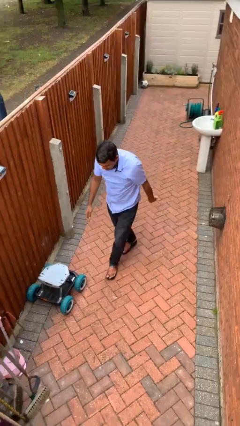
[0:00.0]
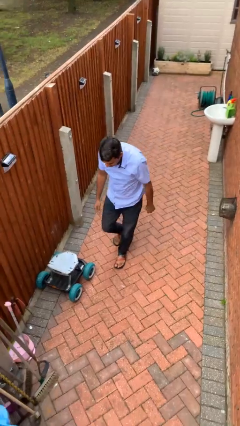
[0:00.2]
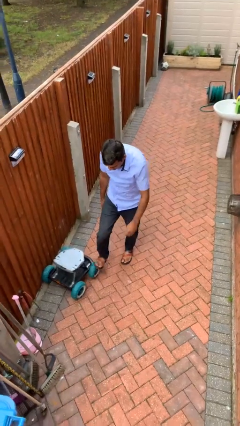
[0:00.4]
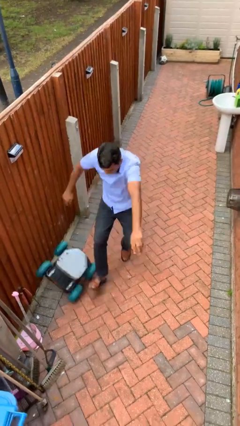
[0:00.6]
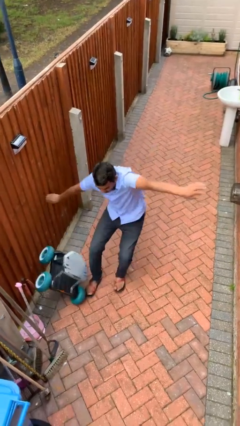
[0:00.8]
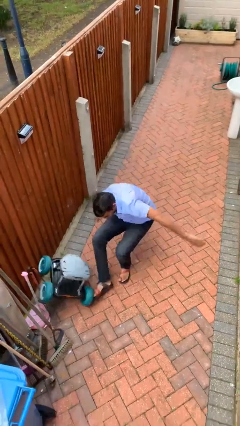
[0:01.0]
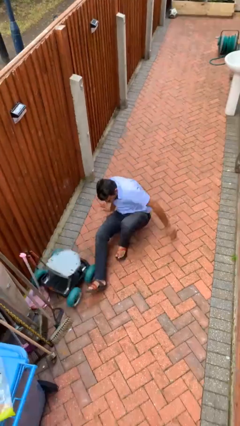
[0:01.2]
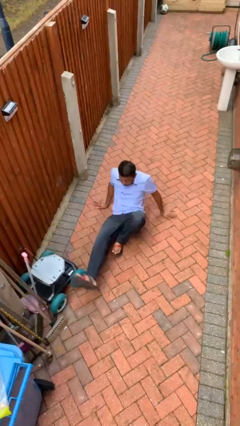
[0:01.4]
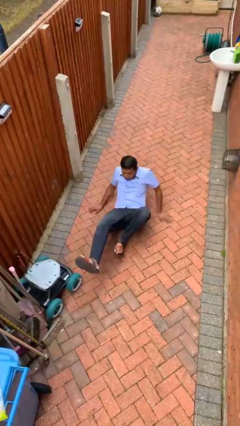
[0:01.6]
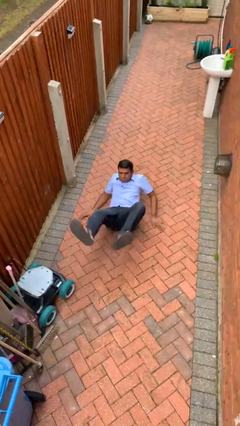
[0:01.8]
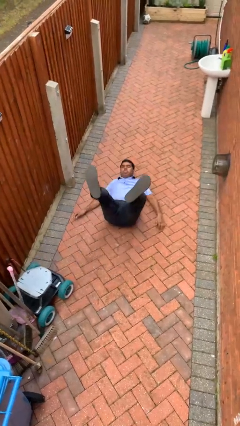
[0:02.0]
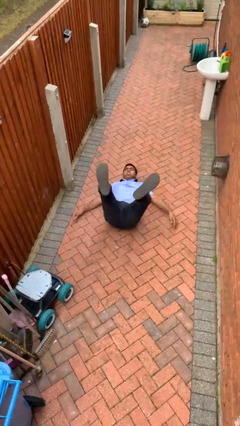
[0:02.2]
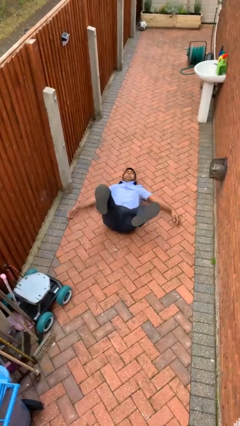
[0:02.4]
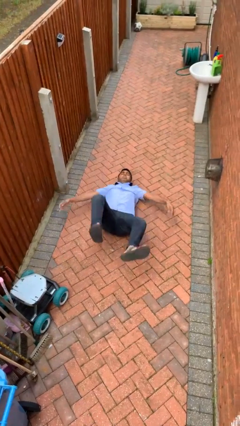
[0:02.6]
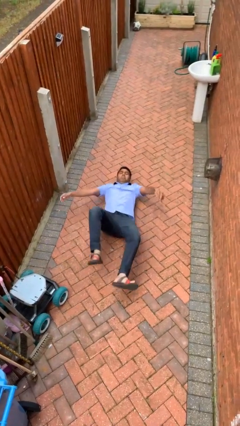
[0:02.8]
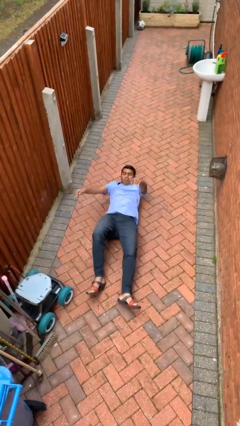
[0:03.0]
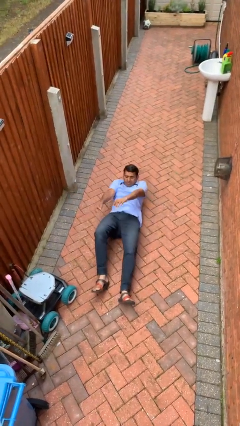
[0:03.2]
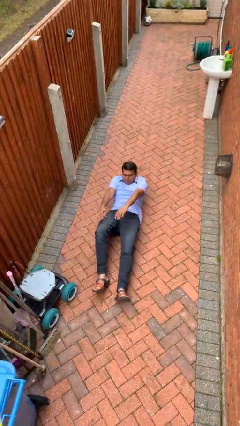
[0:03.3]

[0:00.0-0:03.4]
person trips on object on floor

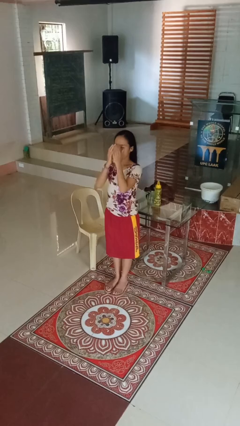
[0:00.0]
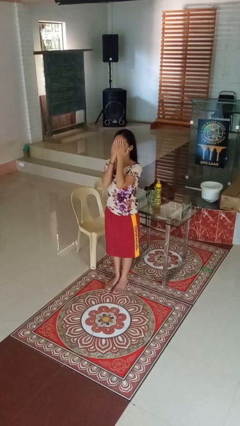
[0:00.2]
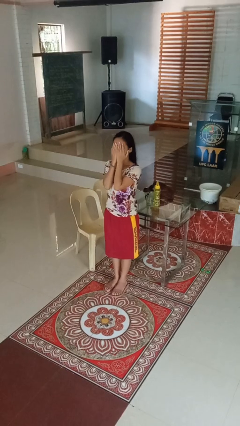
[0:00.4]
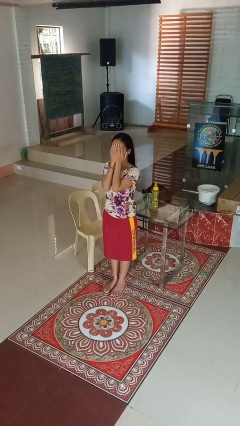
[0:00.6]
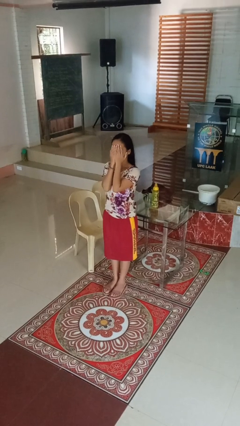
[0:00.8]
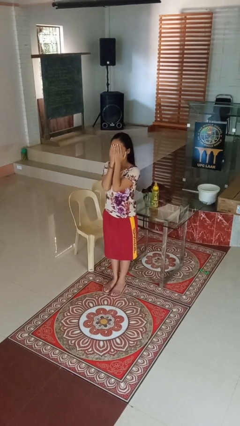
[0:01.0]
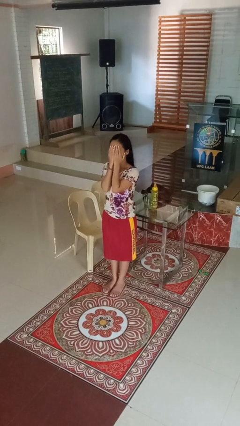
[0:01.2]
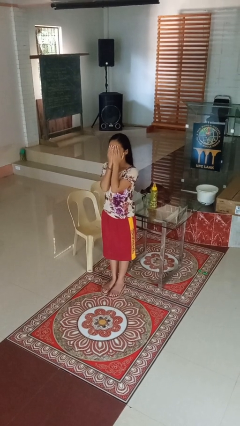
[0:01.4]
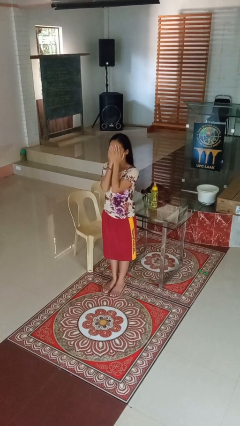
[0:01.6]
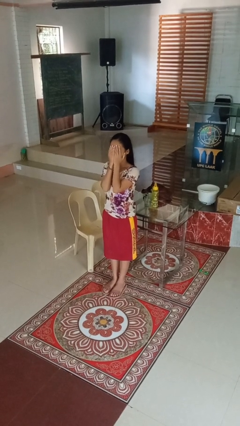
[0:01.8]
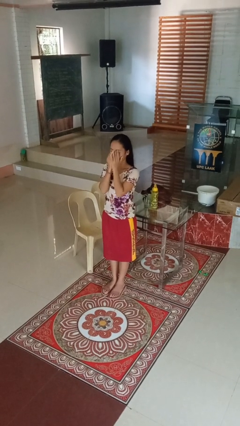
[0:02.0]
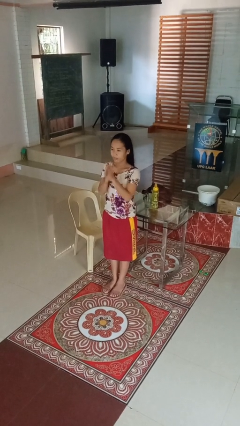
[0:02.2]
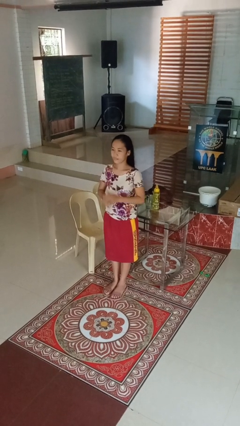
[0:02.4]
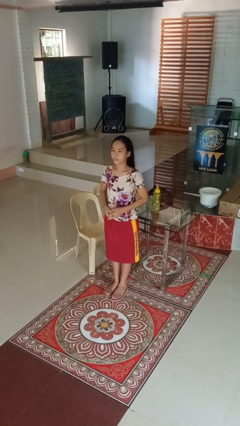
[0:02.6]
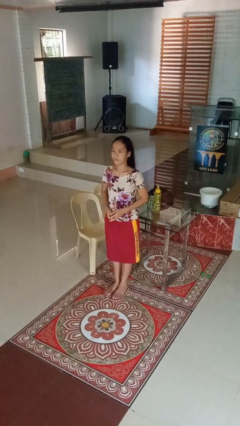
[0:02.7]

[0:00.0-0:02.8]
person covers face with hands

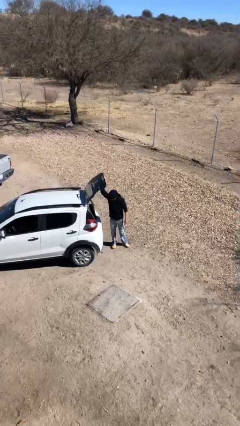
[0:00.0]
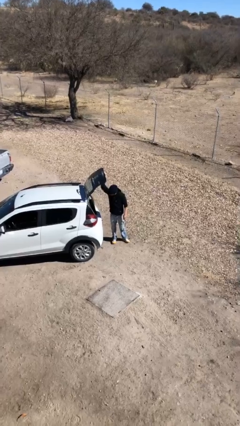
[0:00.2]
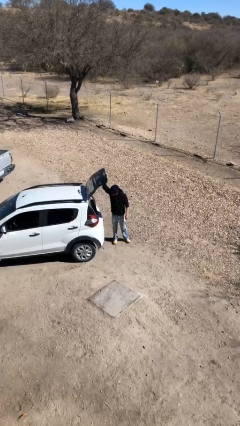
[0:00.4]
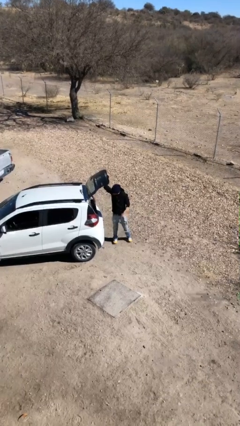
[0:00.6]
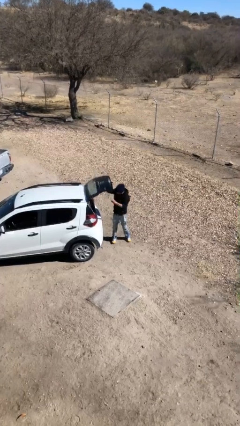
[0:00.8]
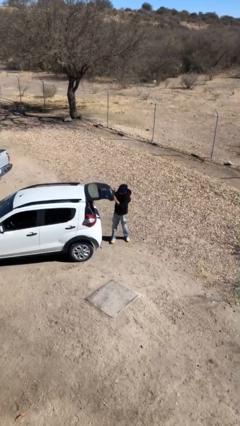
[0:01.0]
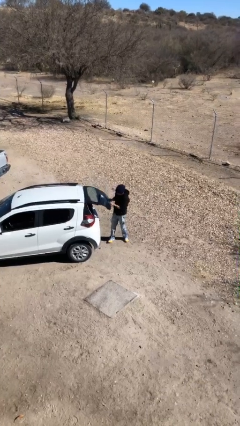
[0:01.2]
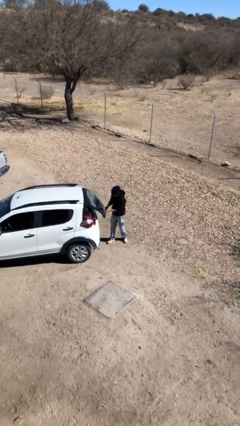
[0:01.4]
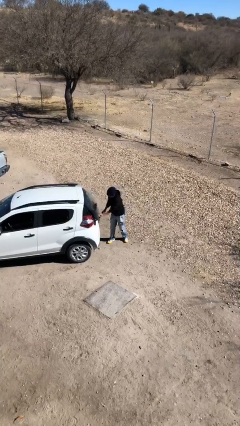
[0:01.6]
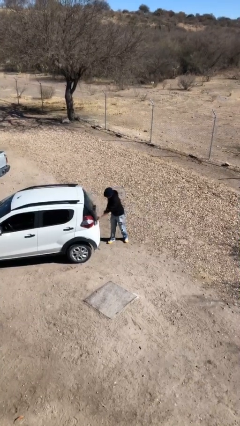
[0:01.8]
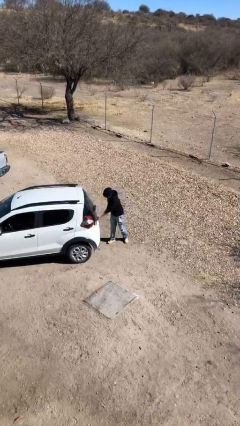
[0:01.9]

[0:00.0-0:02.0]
person closes car trunk

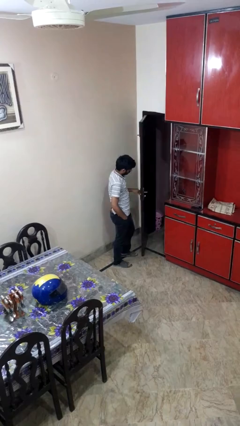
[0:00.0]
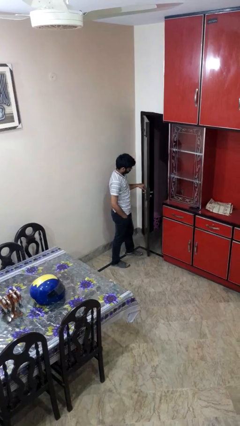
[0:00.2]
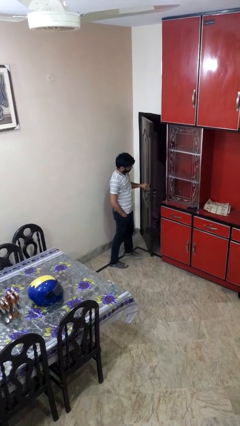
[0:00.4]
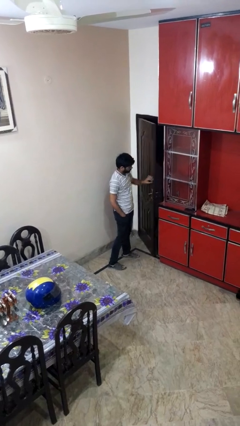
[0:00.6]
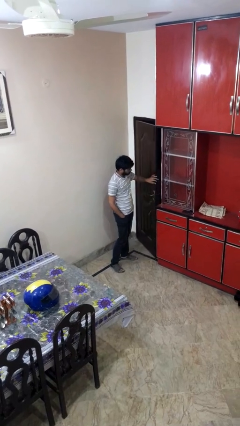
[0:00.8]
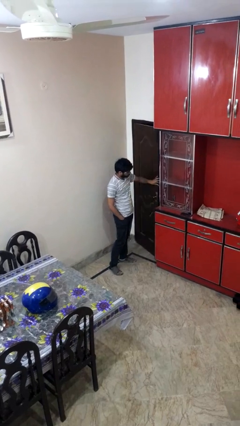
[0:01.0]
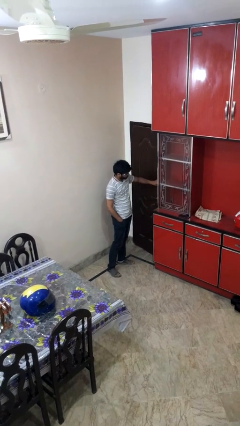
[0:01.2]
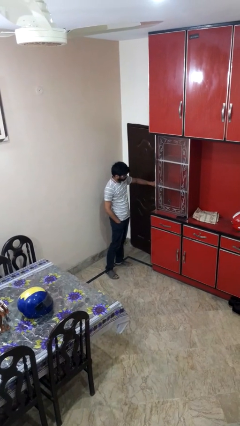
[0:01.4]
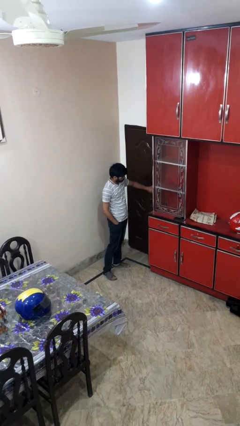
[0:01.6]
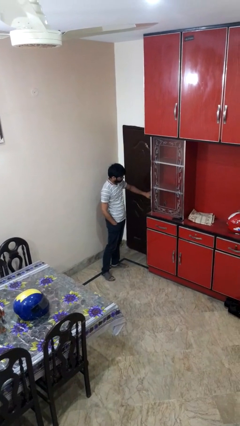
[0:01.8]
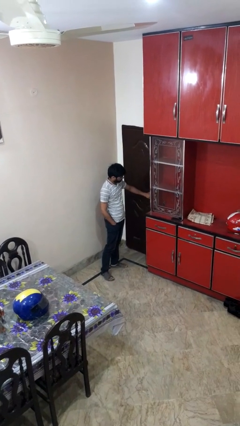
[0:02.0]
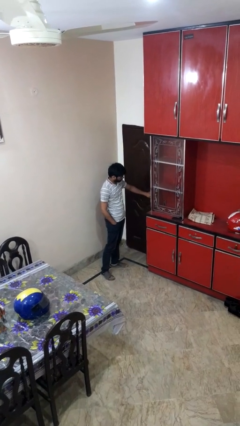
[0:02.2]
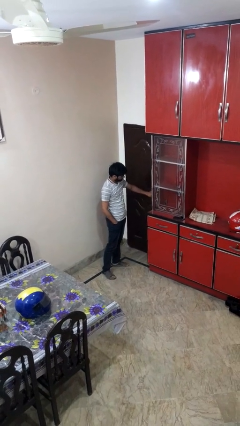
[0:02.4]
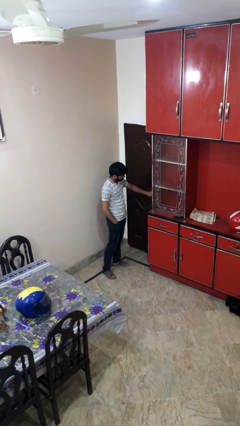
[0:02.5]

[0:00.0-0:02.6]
person closes facility door

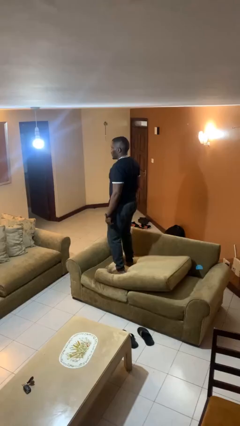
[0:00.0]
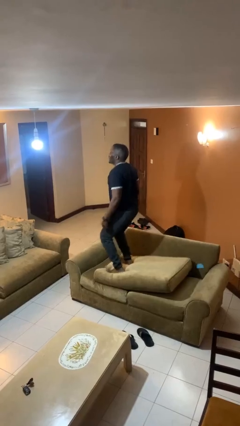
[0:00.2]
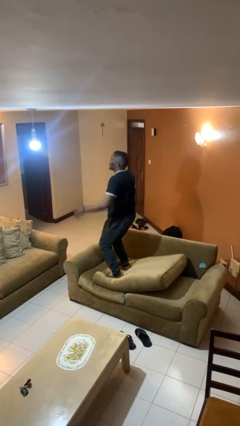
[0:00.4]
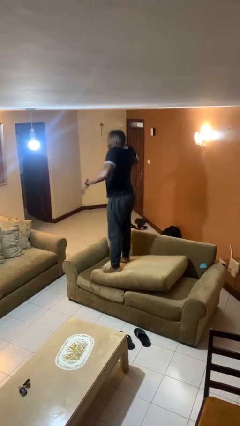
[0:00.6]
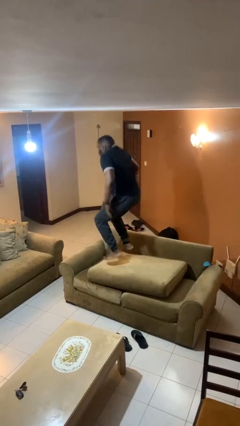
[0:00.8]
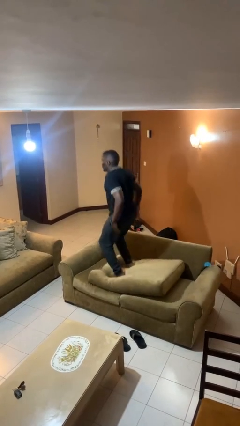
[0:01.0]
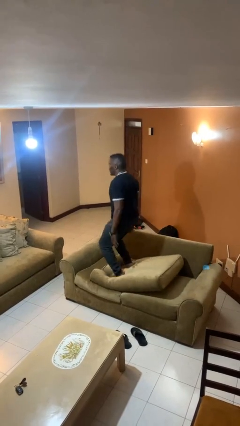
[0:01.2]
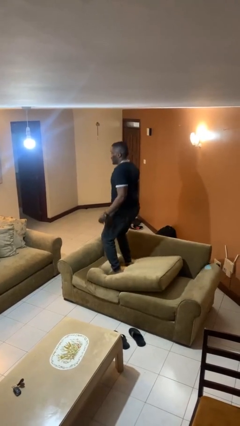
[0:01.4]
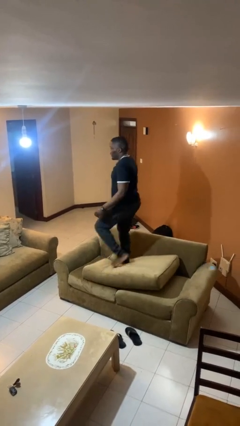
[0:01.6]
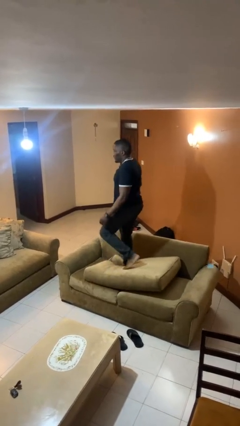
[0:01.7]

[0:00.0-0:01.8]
person jumps on couch

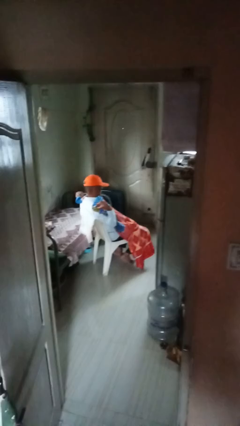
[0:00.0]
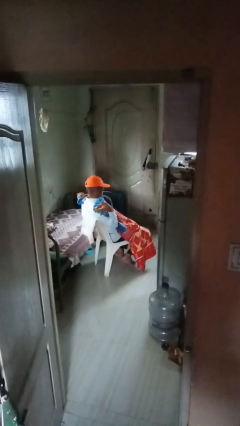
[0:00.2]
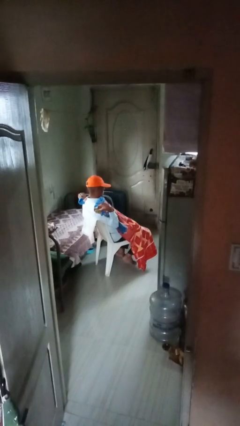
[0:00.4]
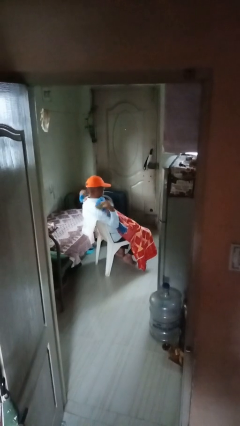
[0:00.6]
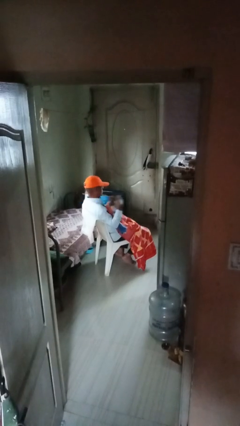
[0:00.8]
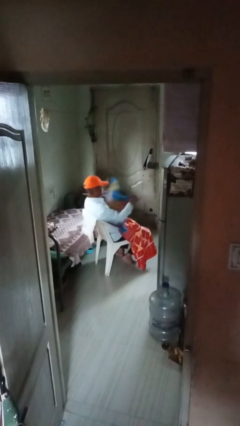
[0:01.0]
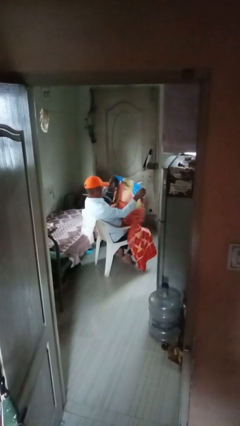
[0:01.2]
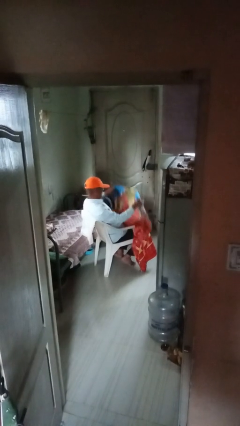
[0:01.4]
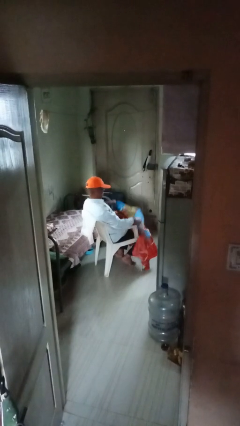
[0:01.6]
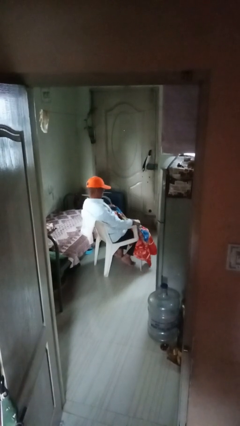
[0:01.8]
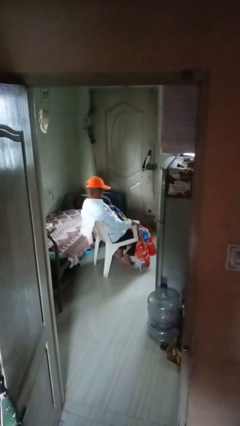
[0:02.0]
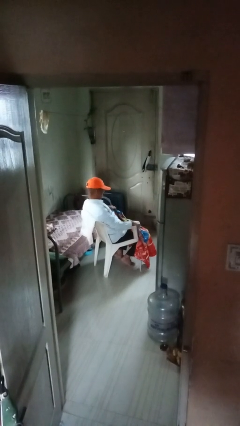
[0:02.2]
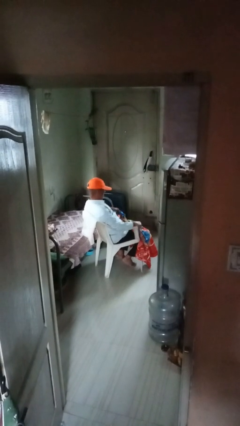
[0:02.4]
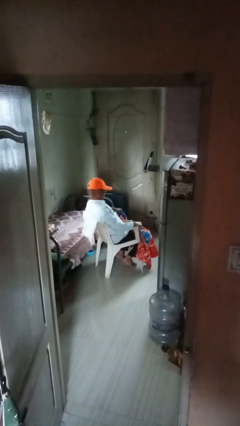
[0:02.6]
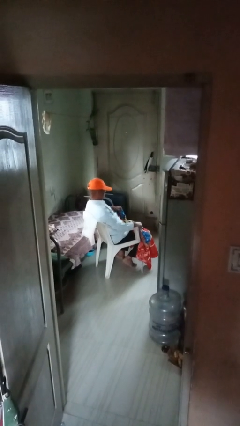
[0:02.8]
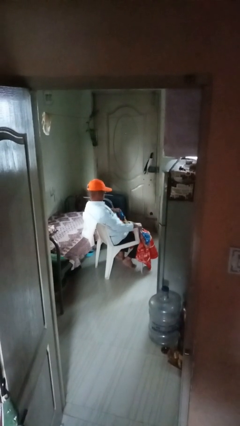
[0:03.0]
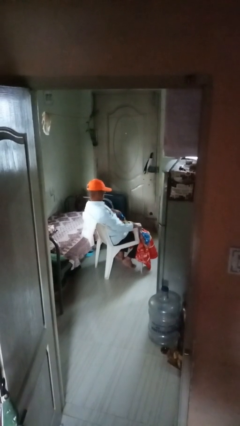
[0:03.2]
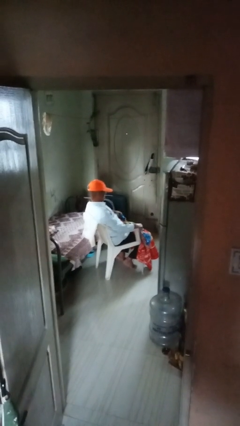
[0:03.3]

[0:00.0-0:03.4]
person uncovers with blanket

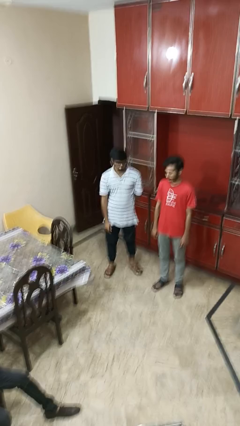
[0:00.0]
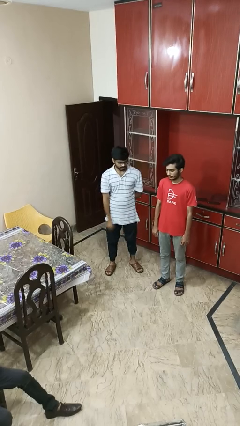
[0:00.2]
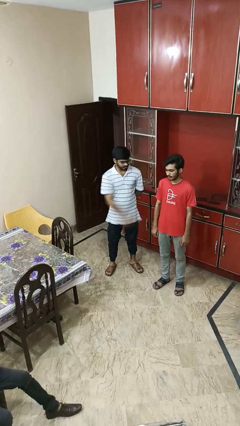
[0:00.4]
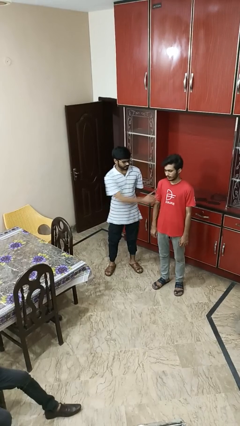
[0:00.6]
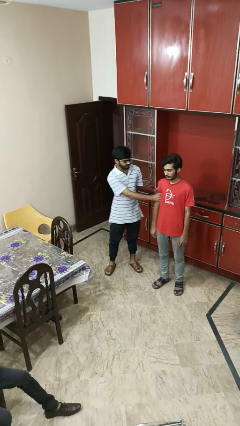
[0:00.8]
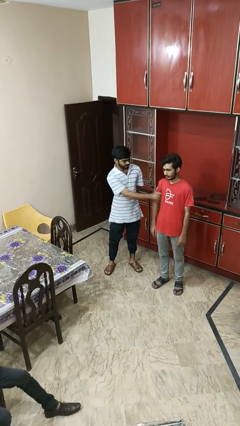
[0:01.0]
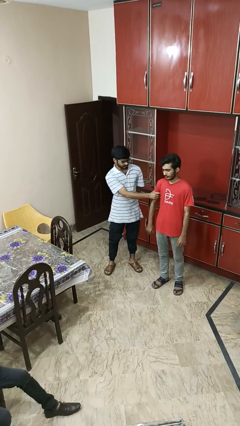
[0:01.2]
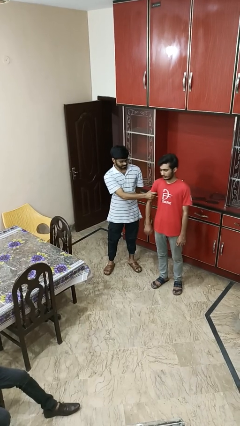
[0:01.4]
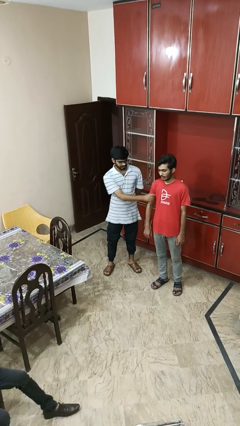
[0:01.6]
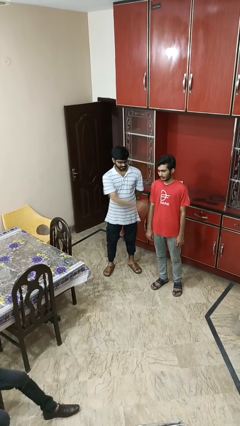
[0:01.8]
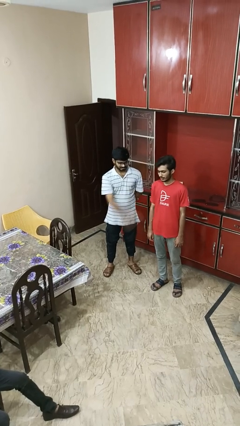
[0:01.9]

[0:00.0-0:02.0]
person grabs person by bicep
